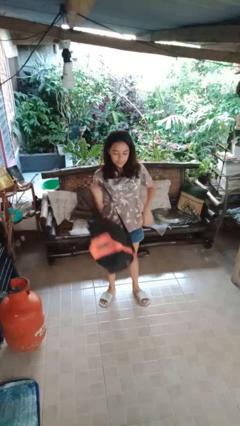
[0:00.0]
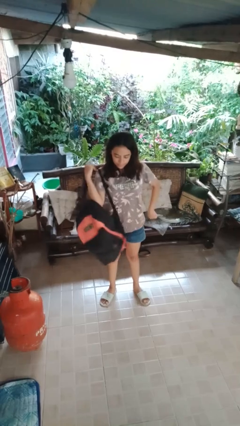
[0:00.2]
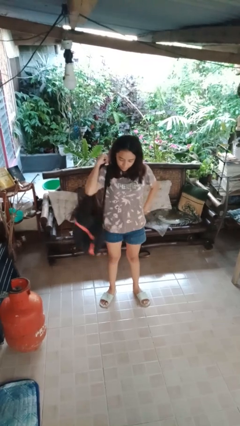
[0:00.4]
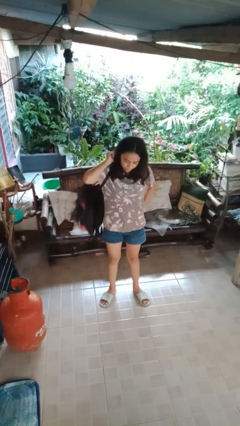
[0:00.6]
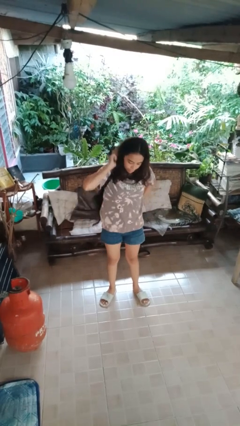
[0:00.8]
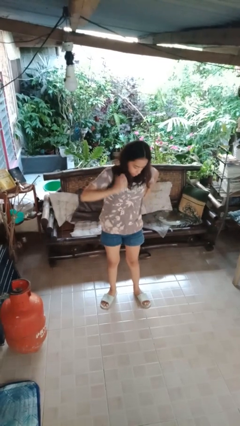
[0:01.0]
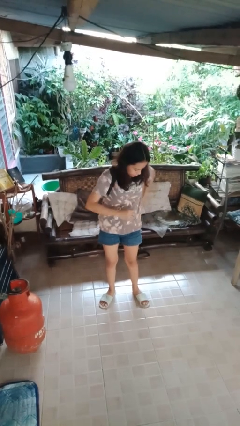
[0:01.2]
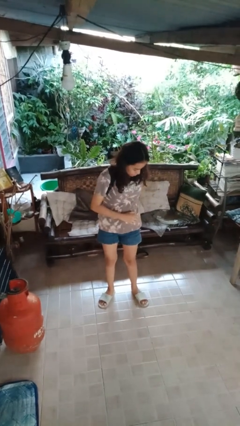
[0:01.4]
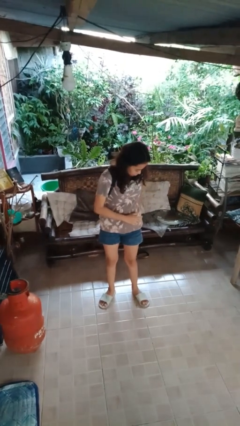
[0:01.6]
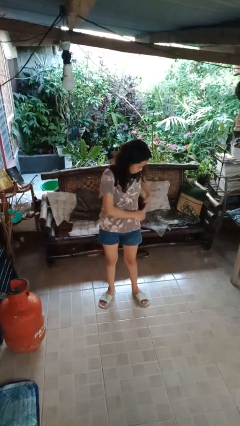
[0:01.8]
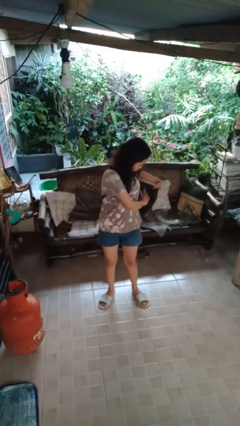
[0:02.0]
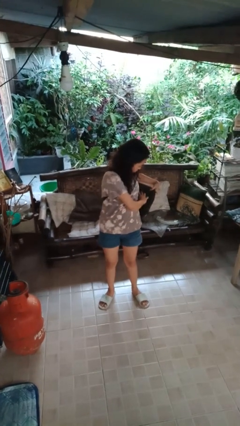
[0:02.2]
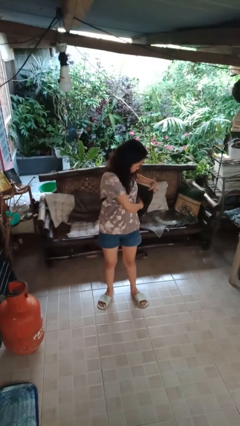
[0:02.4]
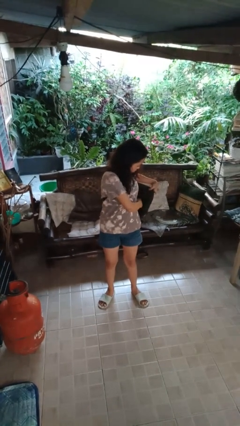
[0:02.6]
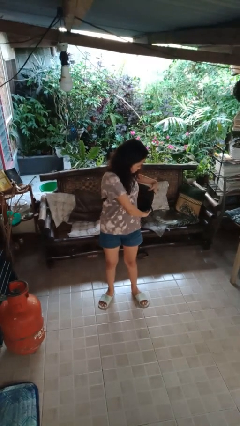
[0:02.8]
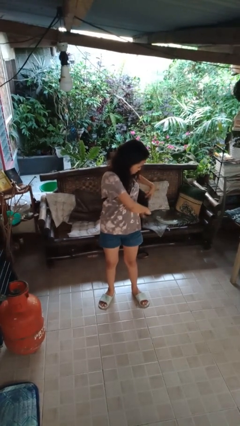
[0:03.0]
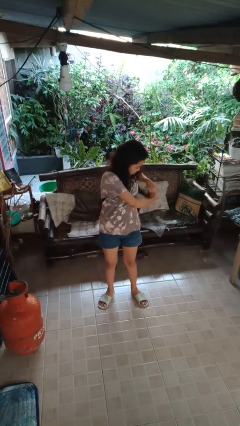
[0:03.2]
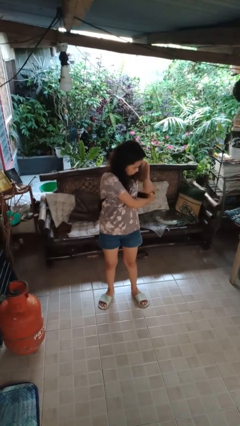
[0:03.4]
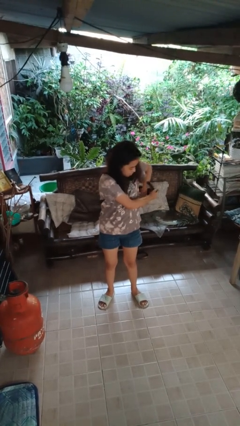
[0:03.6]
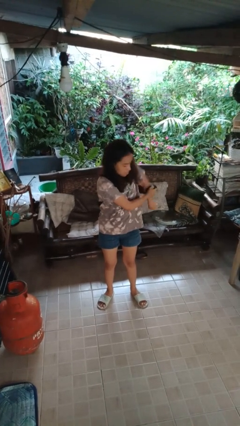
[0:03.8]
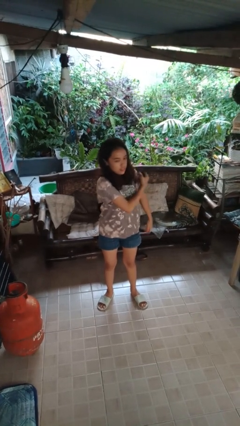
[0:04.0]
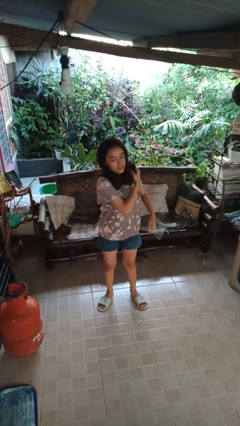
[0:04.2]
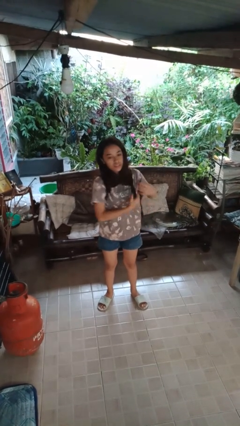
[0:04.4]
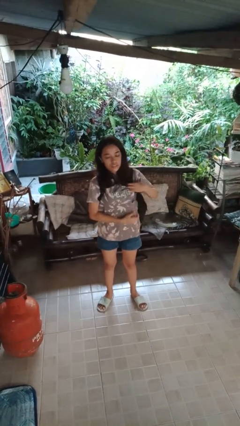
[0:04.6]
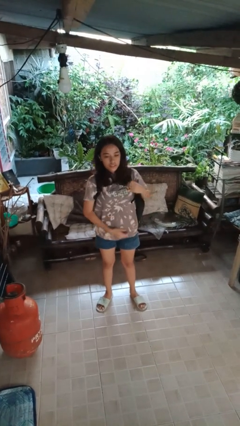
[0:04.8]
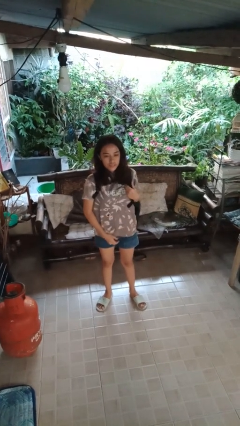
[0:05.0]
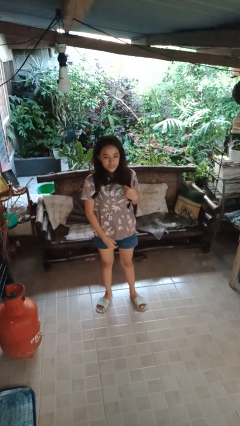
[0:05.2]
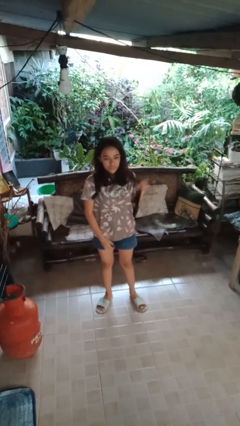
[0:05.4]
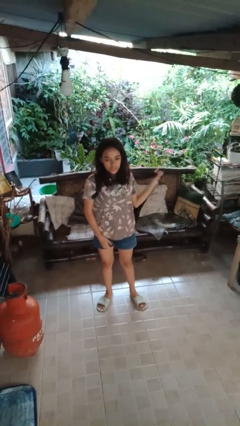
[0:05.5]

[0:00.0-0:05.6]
person puts on backpack

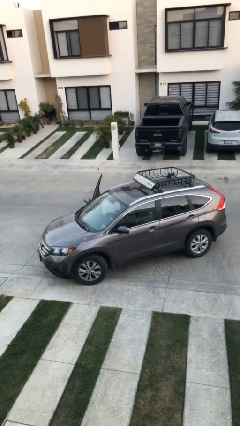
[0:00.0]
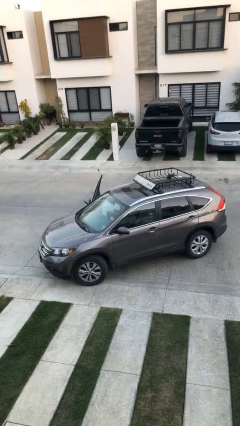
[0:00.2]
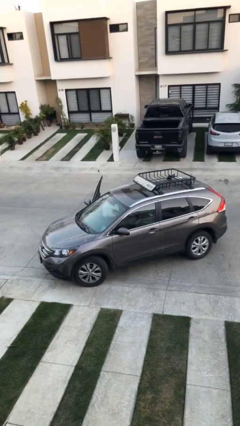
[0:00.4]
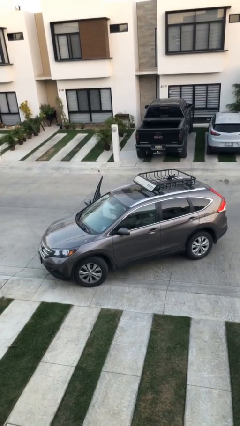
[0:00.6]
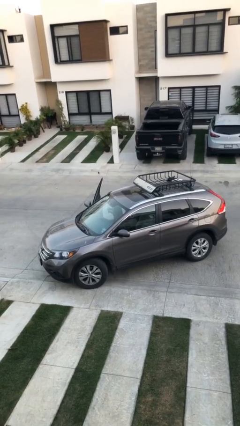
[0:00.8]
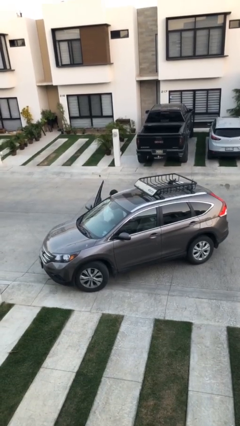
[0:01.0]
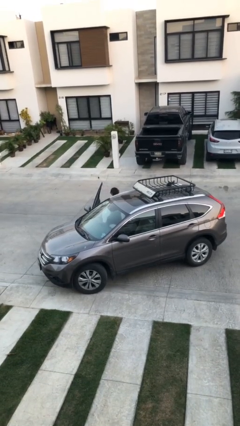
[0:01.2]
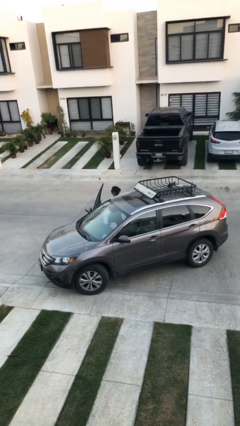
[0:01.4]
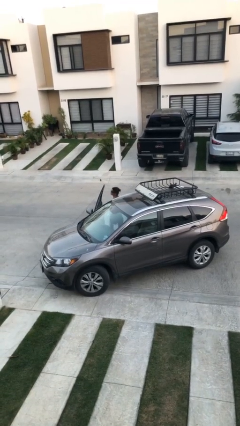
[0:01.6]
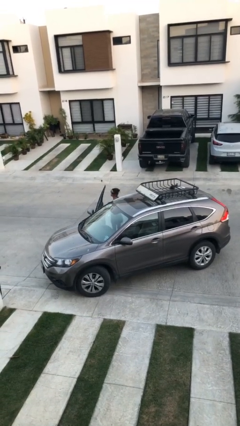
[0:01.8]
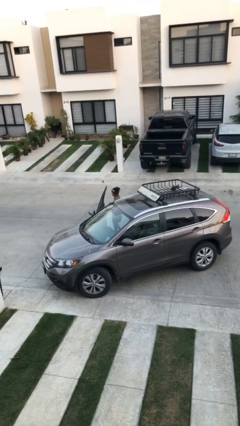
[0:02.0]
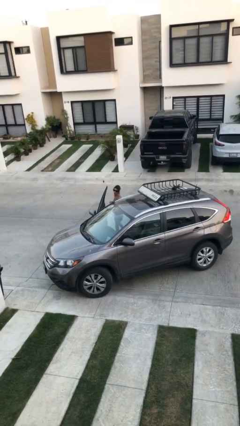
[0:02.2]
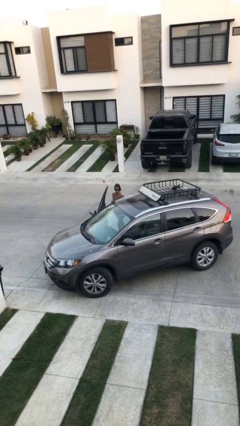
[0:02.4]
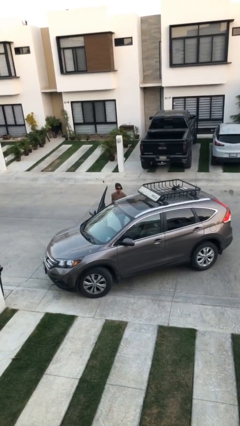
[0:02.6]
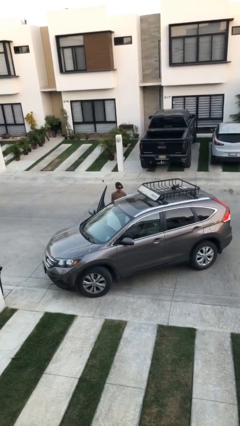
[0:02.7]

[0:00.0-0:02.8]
person exits car

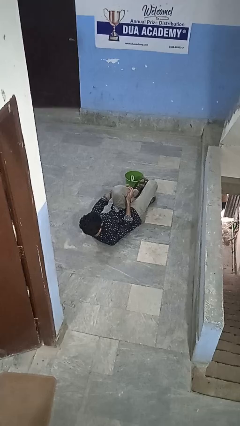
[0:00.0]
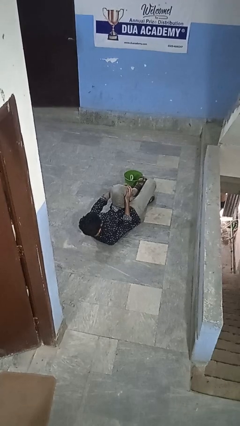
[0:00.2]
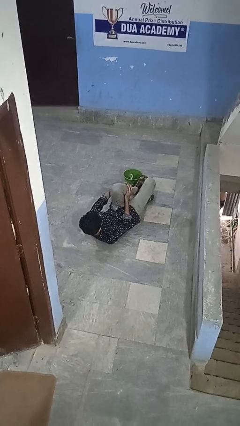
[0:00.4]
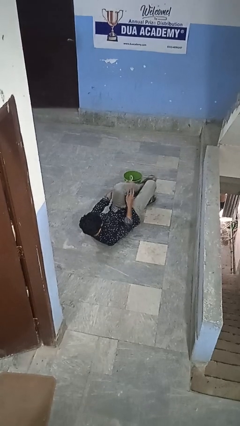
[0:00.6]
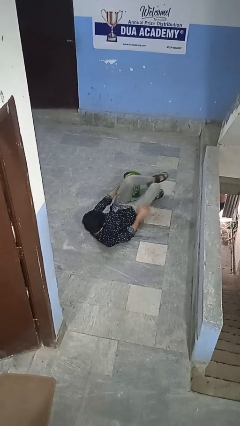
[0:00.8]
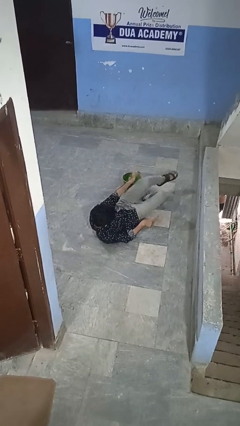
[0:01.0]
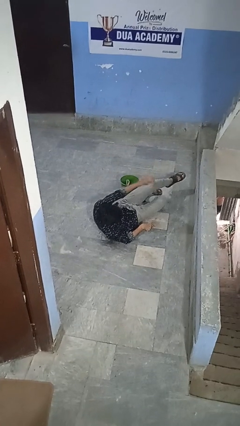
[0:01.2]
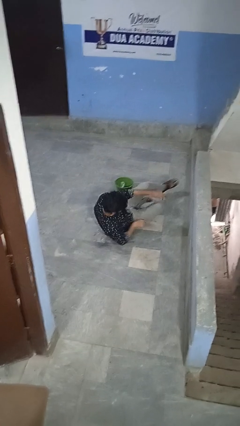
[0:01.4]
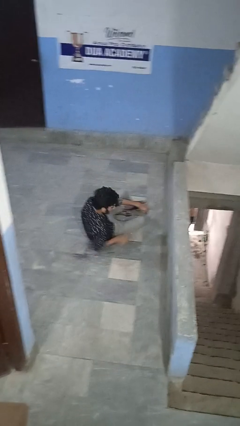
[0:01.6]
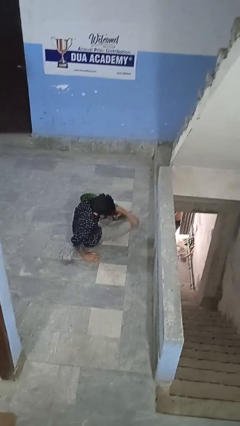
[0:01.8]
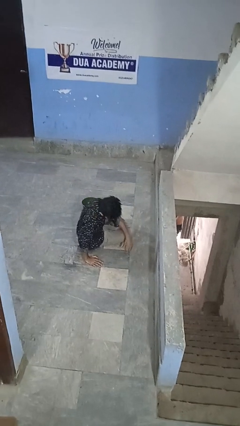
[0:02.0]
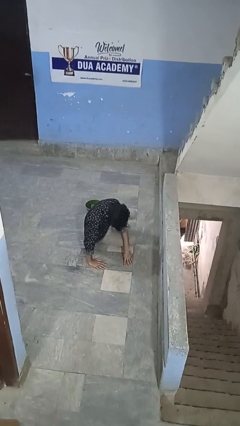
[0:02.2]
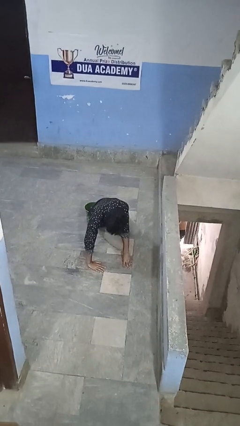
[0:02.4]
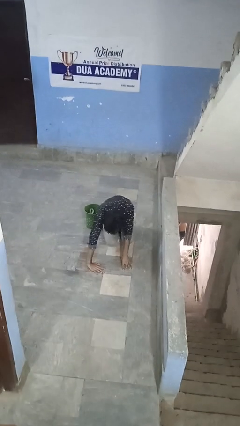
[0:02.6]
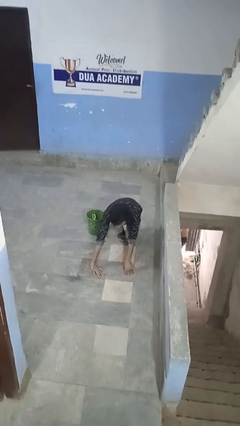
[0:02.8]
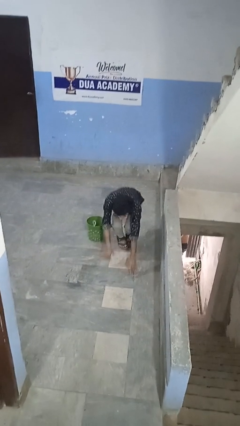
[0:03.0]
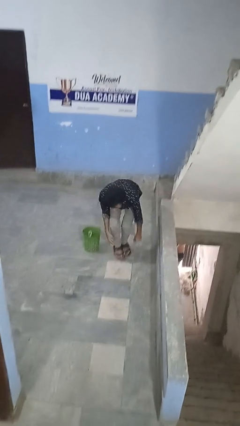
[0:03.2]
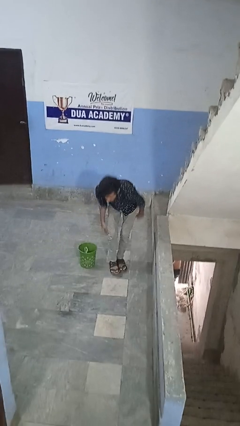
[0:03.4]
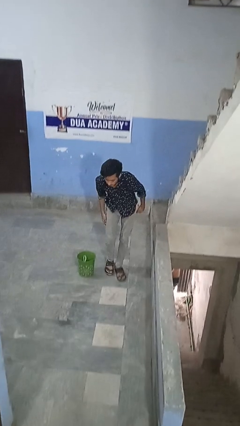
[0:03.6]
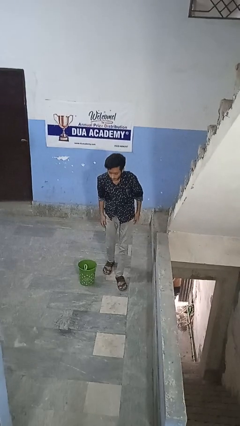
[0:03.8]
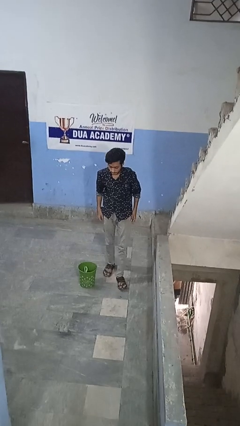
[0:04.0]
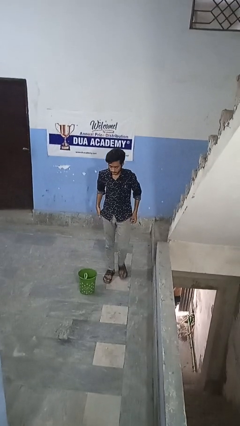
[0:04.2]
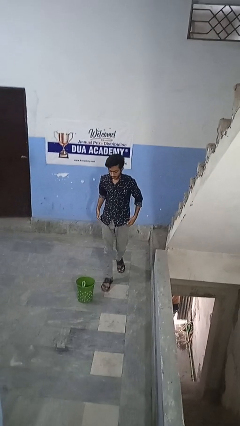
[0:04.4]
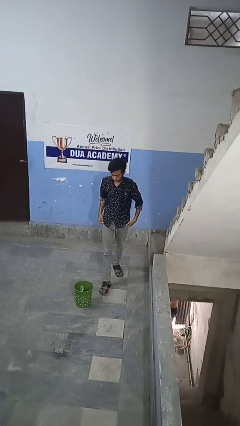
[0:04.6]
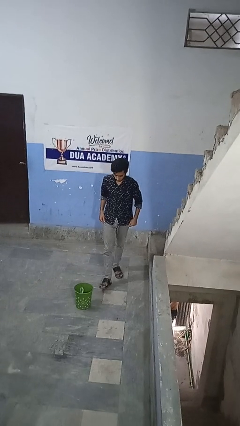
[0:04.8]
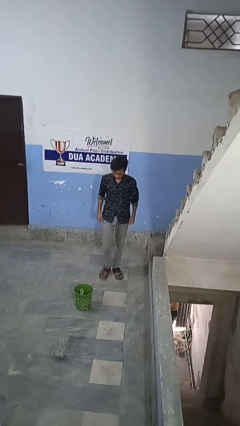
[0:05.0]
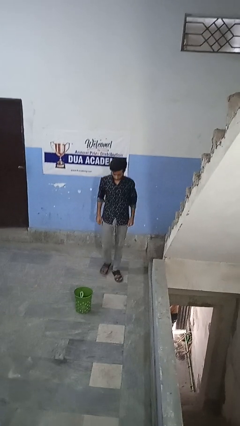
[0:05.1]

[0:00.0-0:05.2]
person stands up from floor

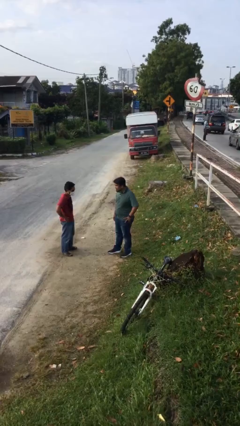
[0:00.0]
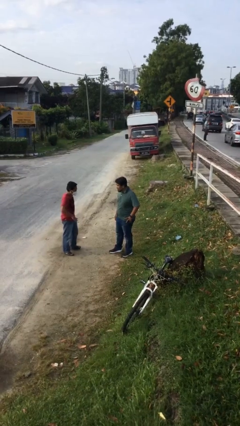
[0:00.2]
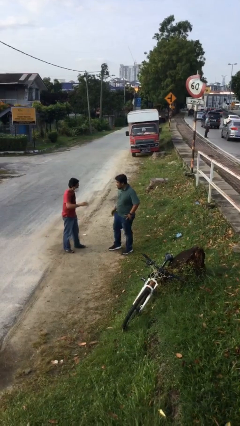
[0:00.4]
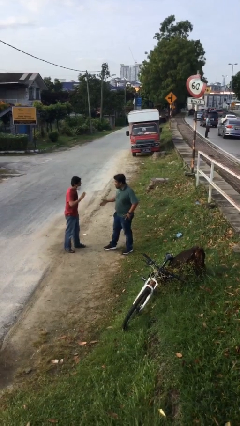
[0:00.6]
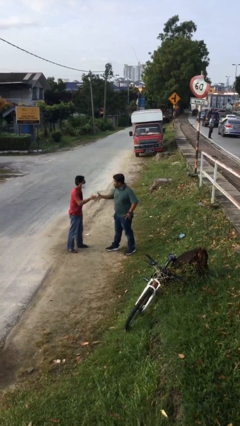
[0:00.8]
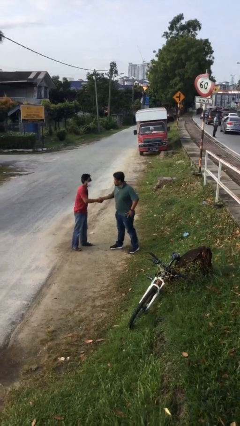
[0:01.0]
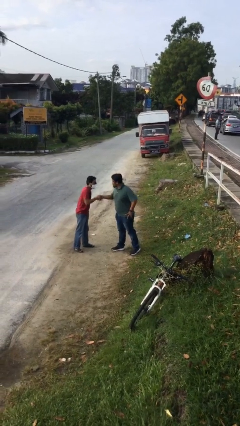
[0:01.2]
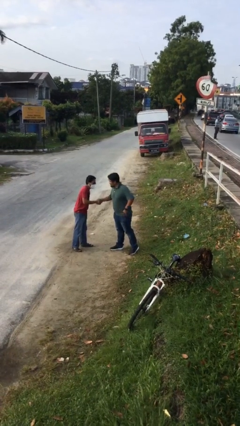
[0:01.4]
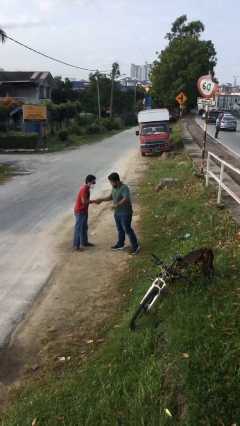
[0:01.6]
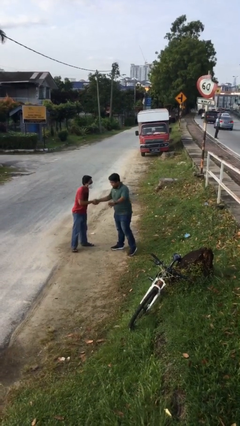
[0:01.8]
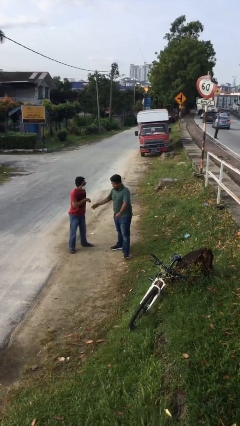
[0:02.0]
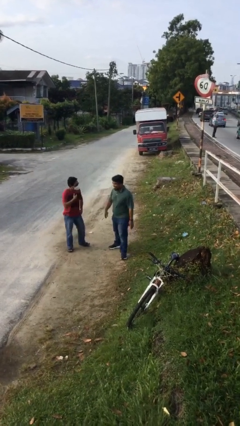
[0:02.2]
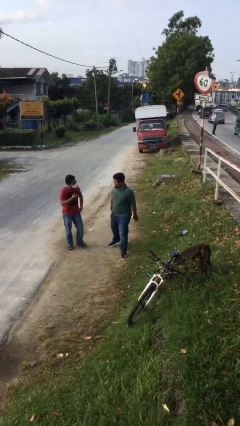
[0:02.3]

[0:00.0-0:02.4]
person shakes hand

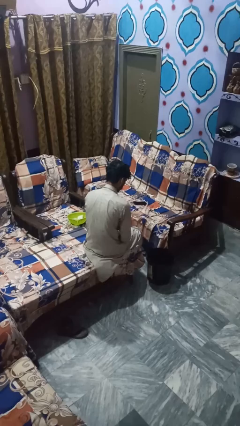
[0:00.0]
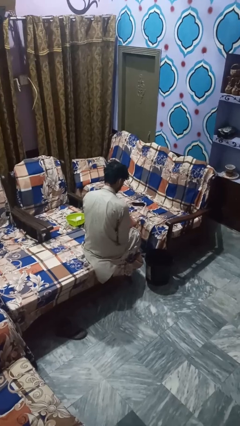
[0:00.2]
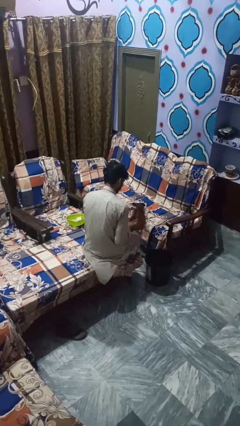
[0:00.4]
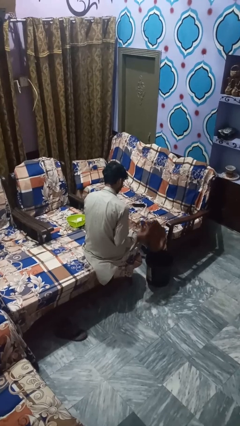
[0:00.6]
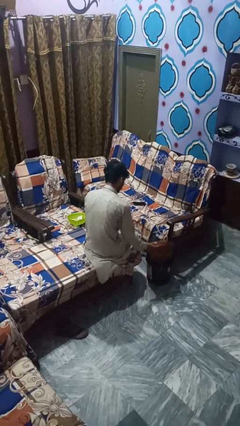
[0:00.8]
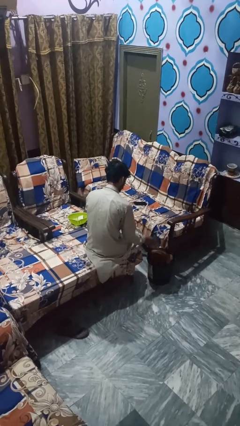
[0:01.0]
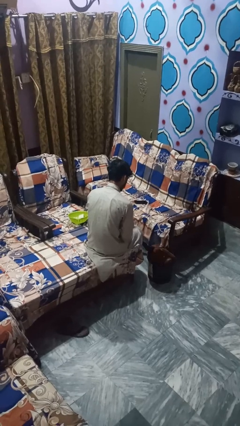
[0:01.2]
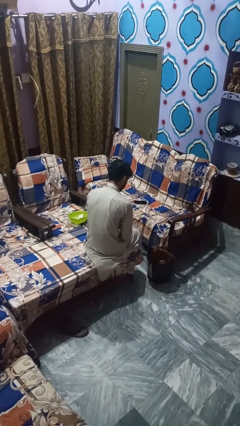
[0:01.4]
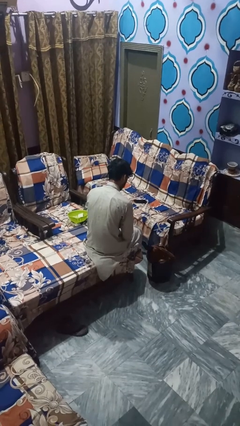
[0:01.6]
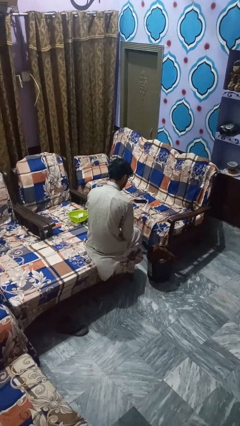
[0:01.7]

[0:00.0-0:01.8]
person puts object into basket
